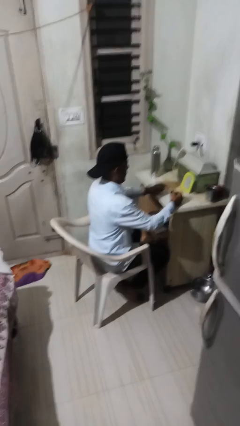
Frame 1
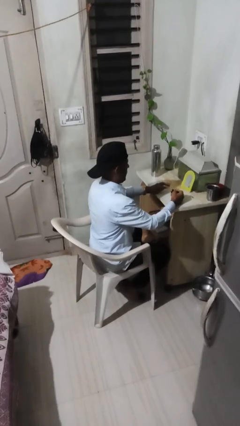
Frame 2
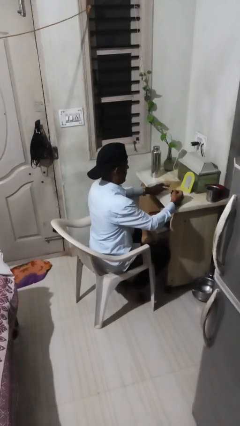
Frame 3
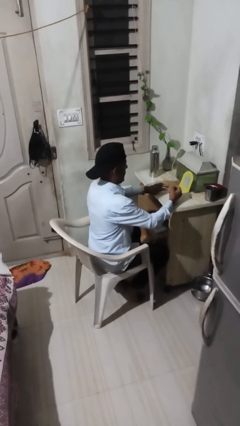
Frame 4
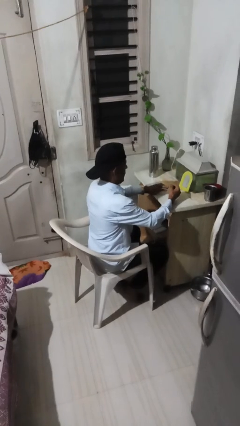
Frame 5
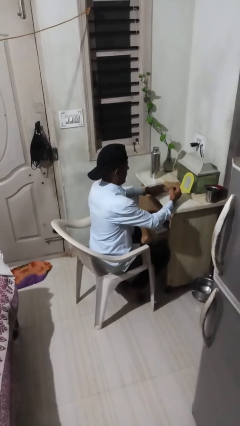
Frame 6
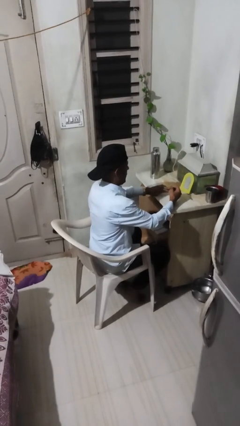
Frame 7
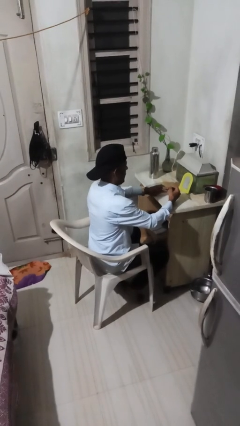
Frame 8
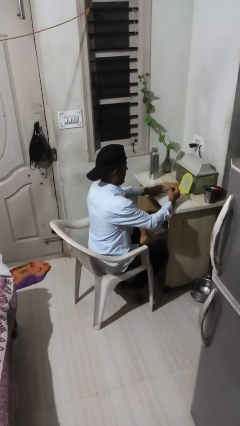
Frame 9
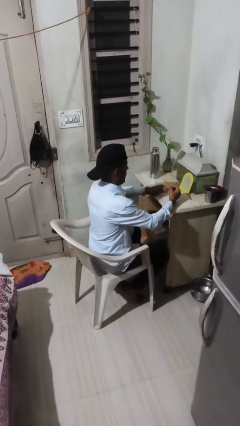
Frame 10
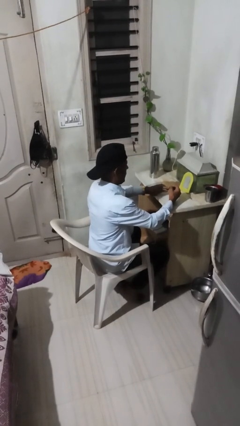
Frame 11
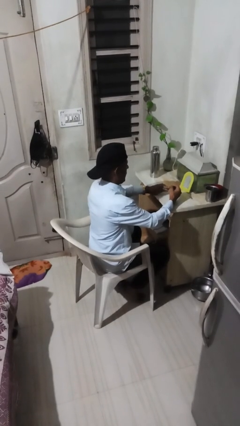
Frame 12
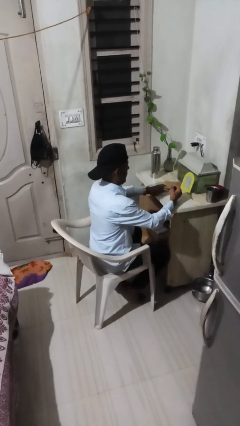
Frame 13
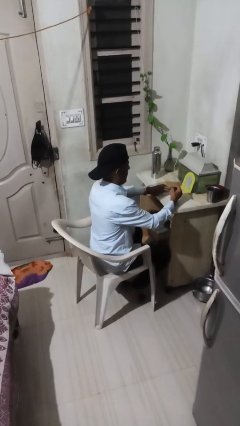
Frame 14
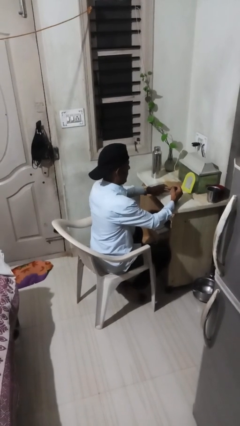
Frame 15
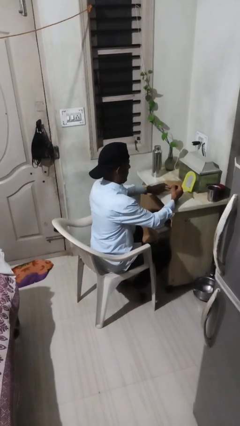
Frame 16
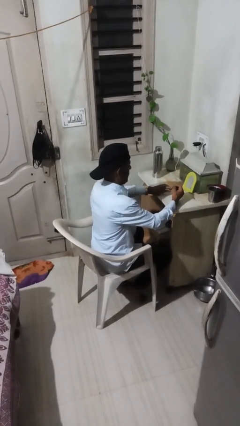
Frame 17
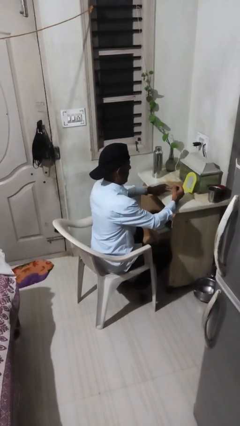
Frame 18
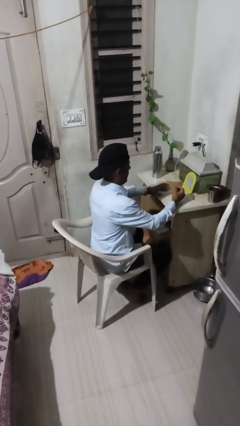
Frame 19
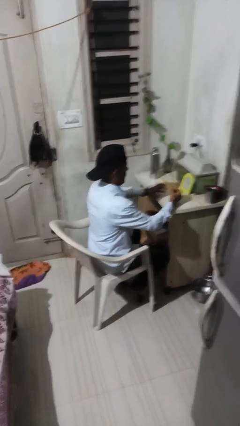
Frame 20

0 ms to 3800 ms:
person paints fingernails

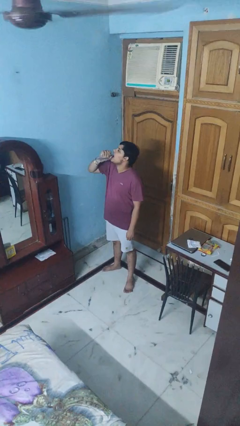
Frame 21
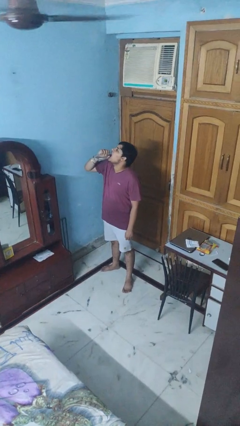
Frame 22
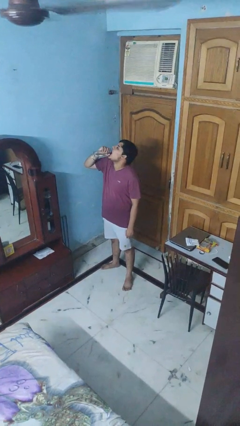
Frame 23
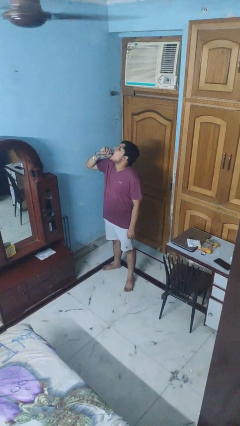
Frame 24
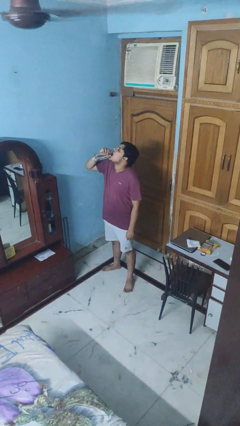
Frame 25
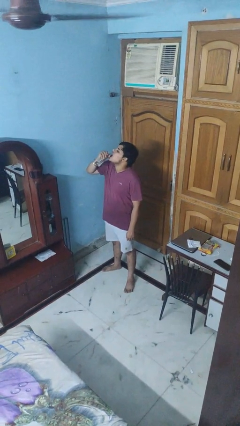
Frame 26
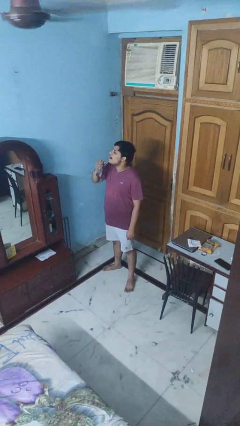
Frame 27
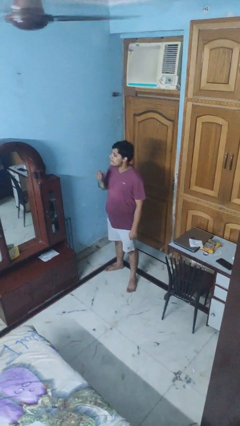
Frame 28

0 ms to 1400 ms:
person drinks from bottle

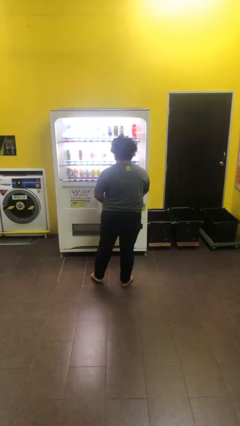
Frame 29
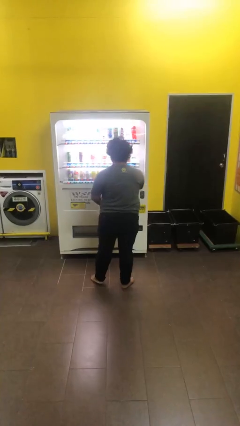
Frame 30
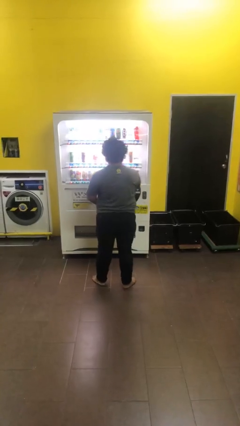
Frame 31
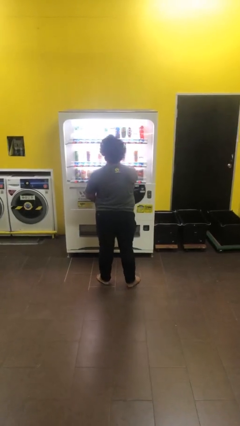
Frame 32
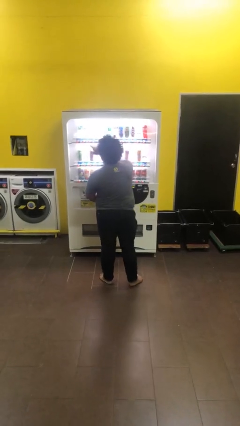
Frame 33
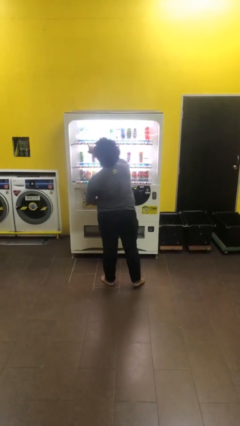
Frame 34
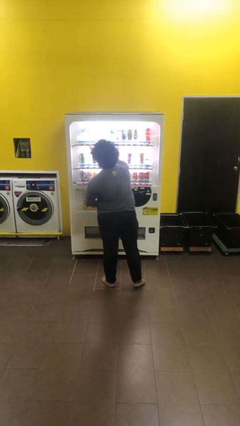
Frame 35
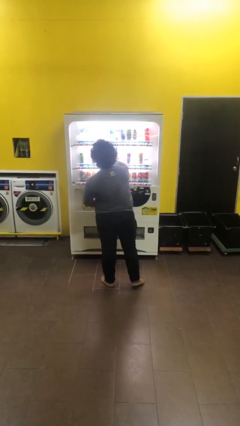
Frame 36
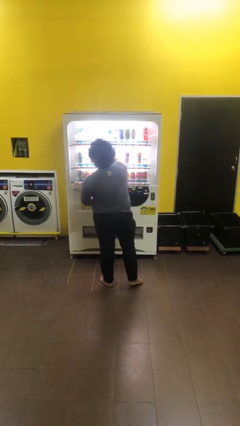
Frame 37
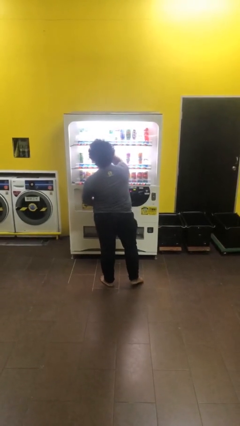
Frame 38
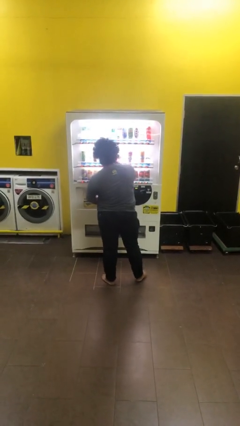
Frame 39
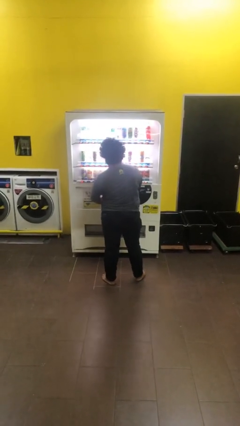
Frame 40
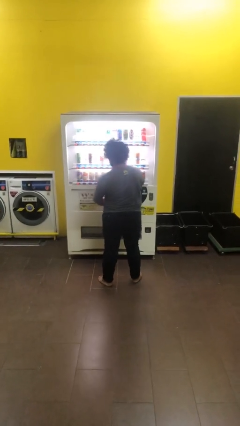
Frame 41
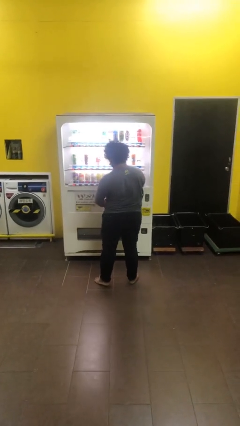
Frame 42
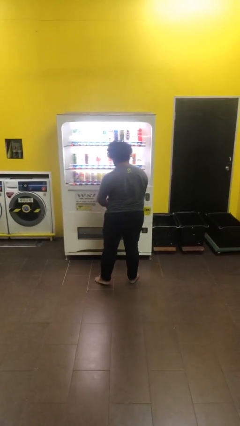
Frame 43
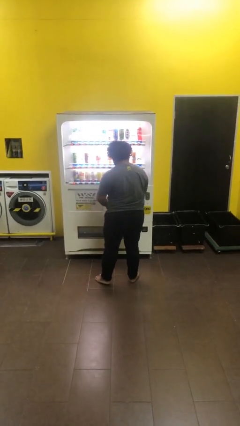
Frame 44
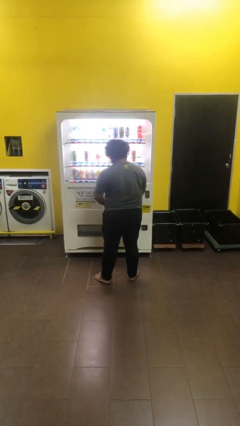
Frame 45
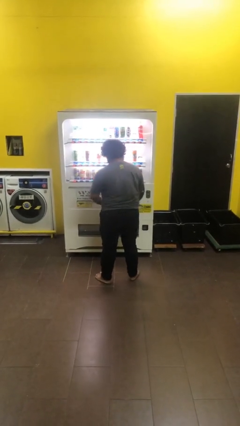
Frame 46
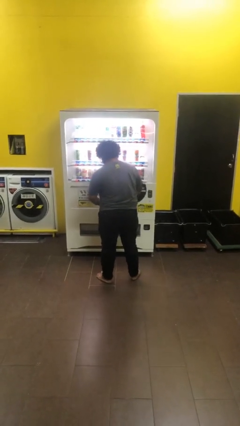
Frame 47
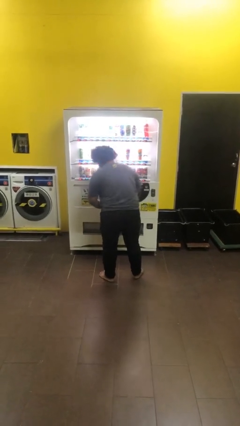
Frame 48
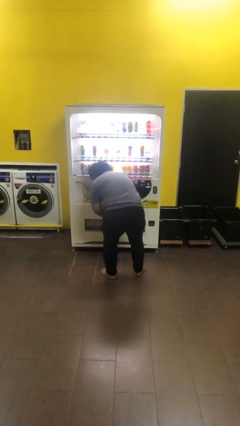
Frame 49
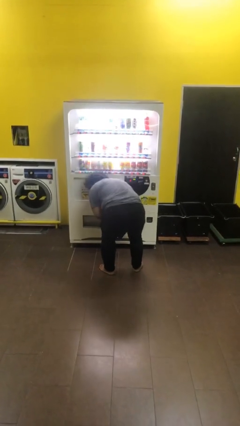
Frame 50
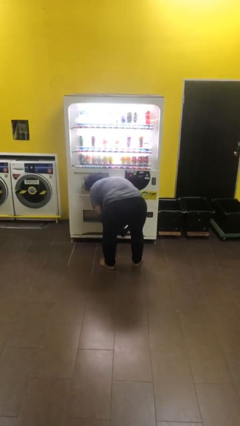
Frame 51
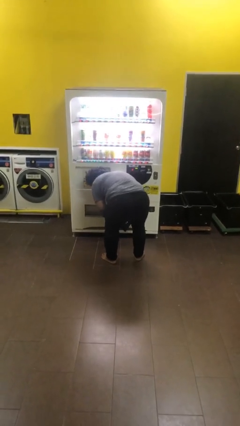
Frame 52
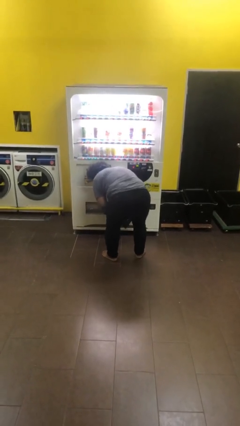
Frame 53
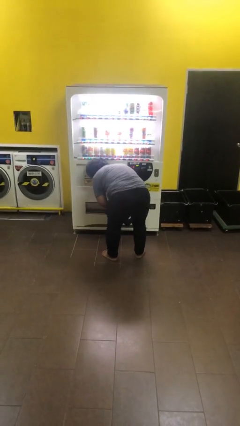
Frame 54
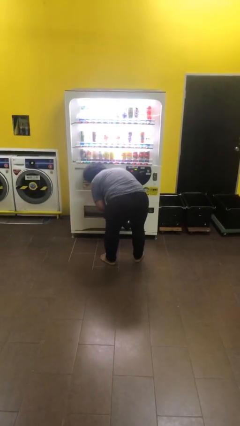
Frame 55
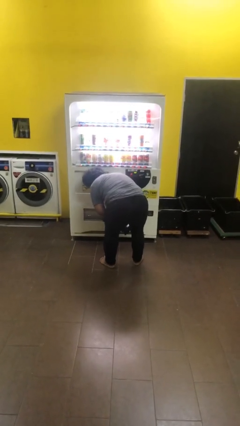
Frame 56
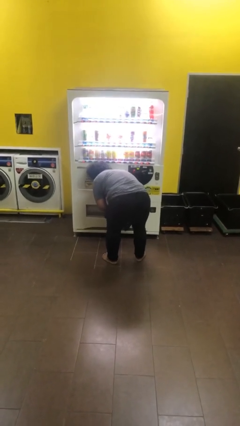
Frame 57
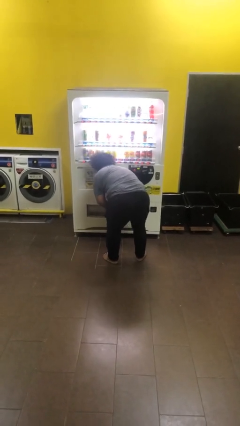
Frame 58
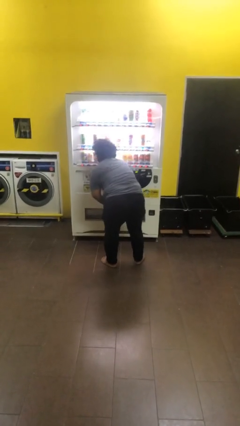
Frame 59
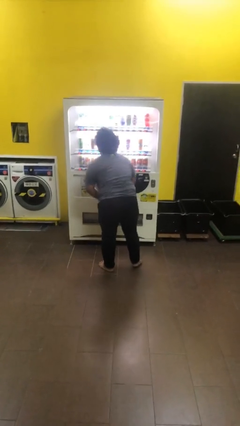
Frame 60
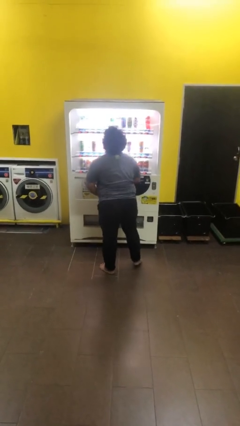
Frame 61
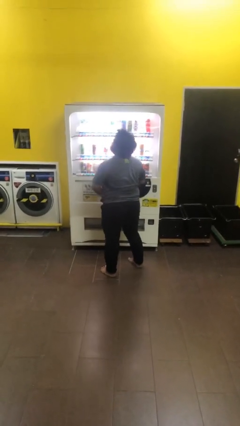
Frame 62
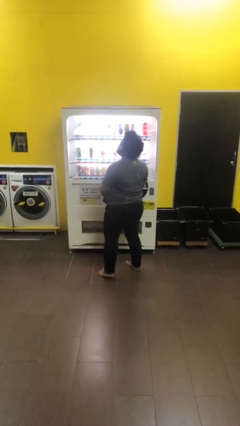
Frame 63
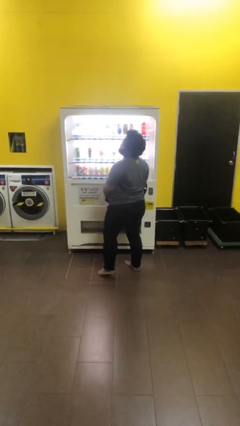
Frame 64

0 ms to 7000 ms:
person purchases from machine

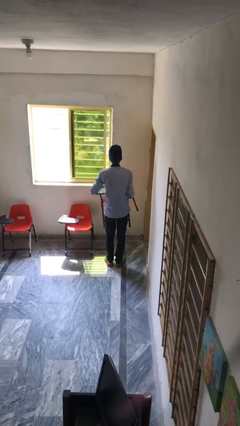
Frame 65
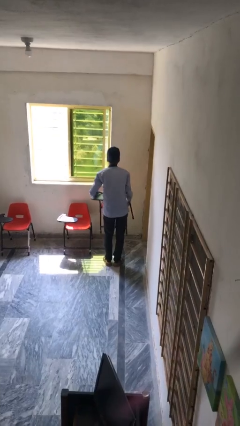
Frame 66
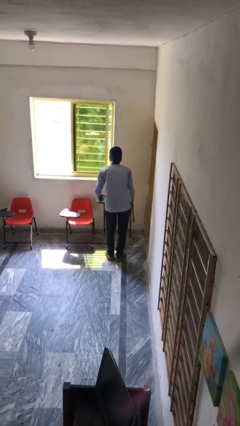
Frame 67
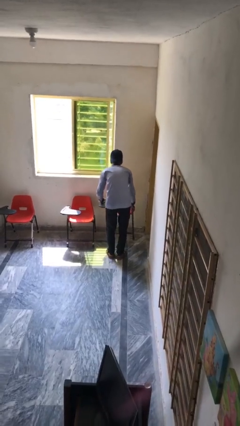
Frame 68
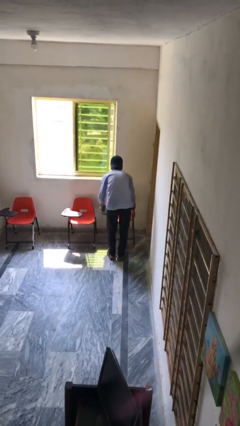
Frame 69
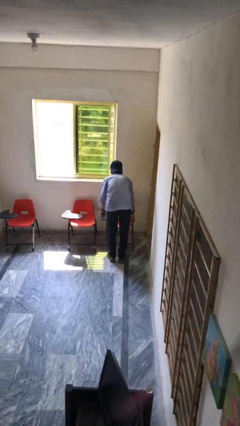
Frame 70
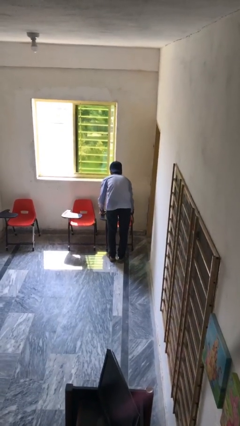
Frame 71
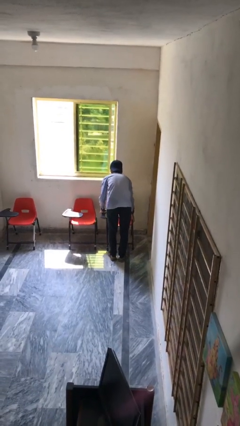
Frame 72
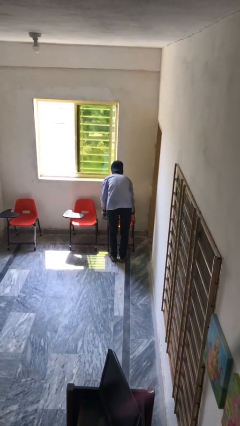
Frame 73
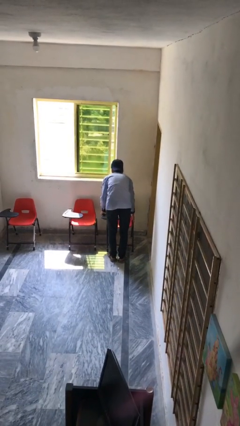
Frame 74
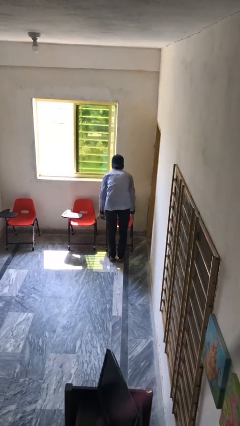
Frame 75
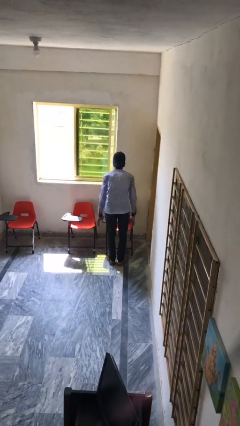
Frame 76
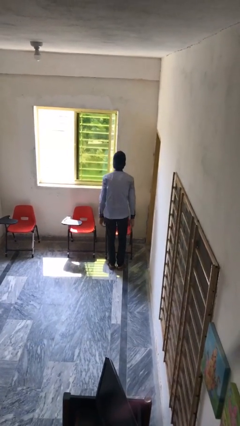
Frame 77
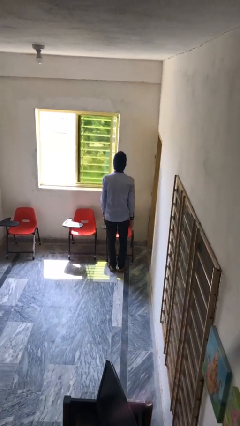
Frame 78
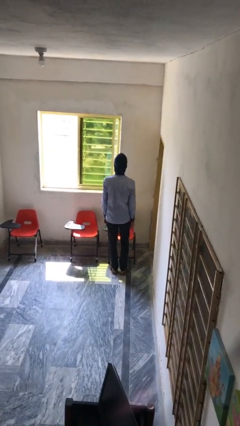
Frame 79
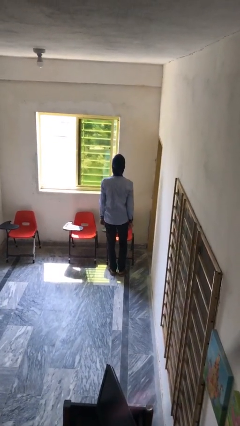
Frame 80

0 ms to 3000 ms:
person puts down object on floor

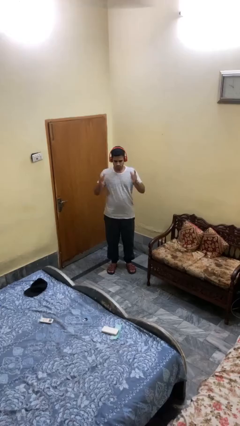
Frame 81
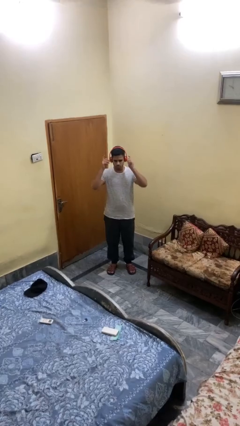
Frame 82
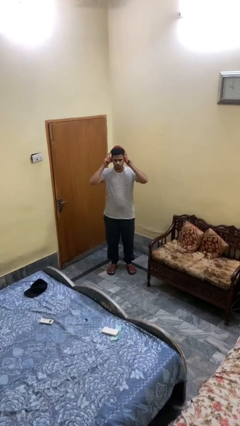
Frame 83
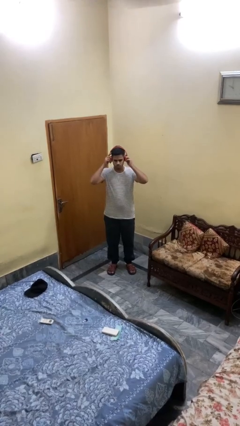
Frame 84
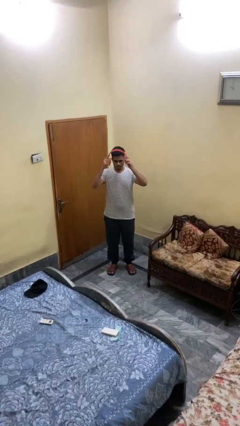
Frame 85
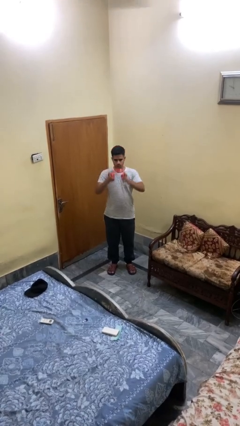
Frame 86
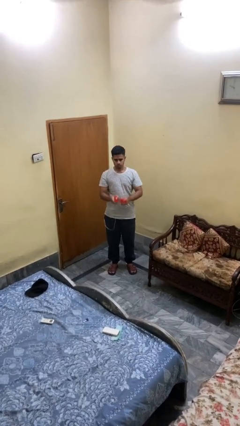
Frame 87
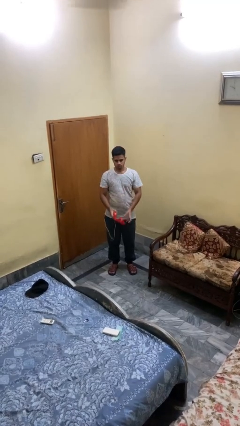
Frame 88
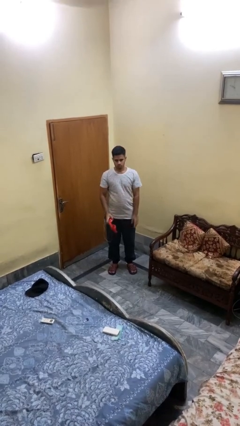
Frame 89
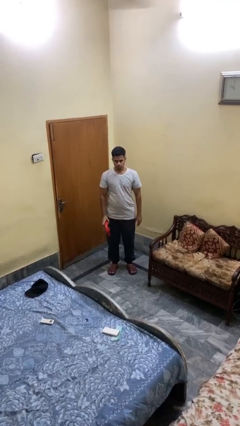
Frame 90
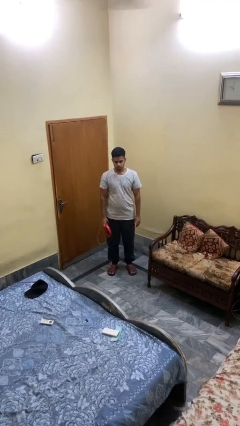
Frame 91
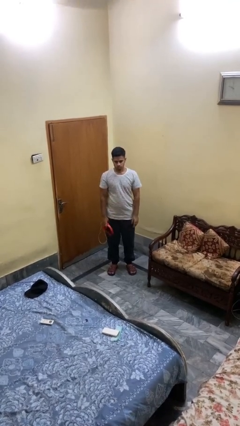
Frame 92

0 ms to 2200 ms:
person takes off headphones

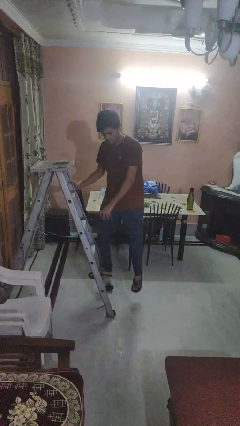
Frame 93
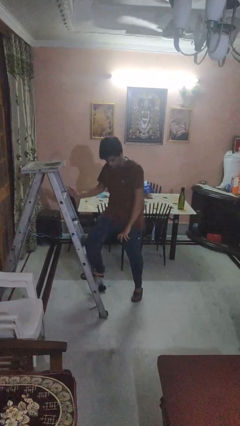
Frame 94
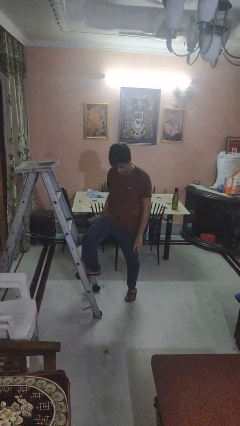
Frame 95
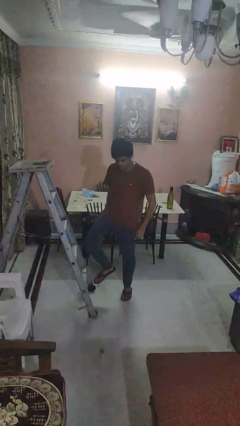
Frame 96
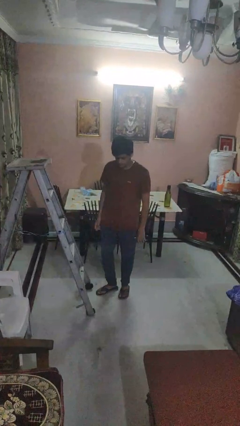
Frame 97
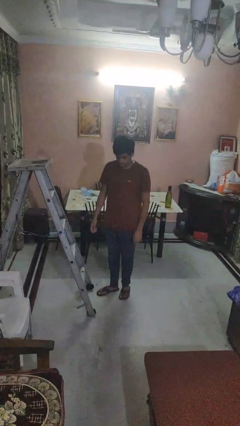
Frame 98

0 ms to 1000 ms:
person climbs down ladder
